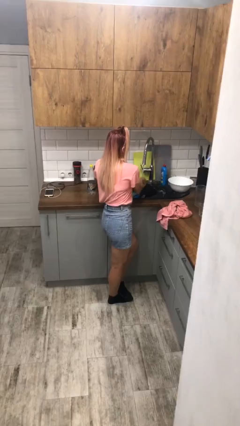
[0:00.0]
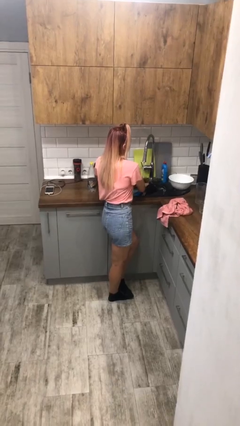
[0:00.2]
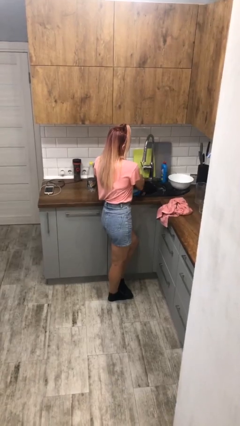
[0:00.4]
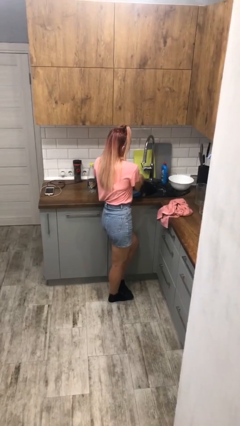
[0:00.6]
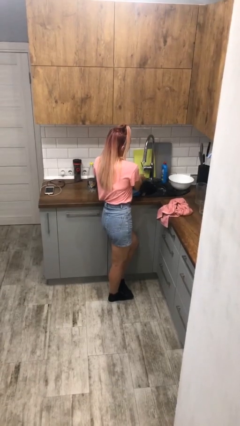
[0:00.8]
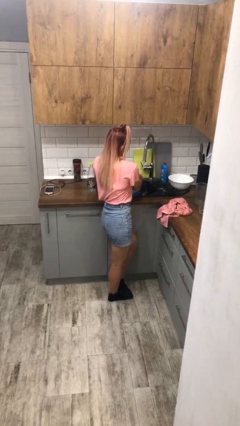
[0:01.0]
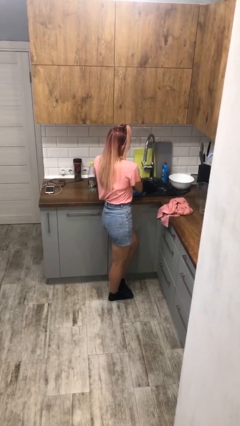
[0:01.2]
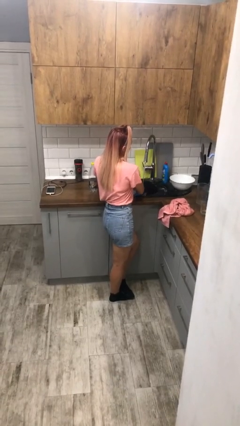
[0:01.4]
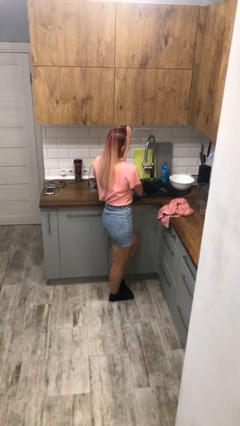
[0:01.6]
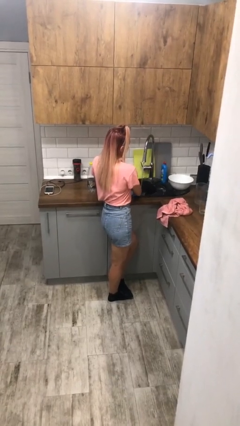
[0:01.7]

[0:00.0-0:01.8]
person washes hands

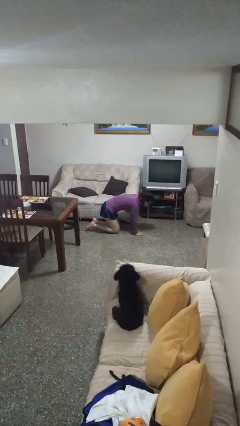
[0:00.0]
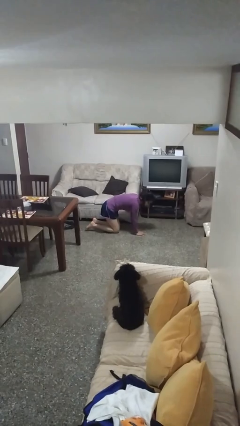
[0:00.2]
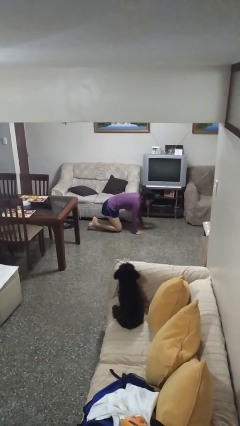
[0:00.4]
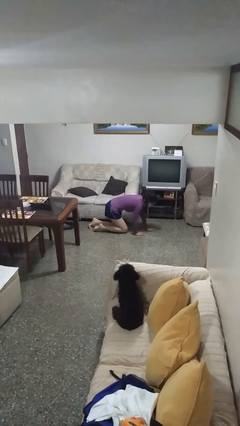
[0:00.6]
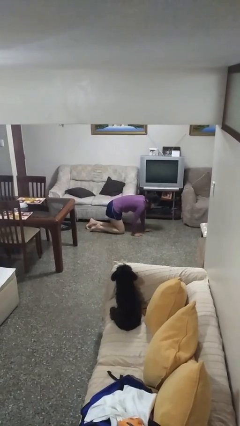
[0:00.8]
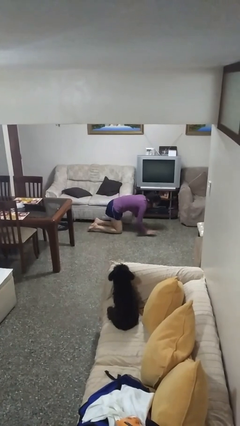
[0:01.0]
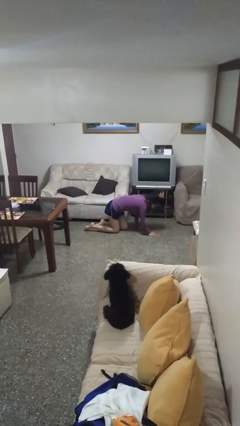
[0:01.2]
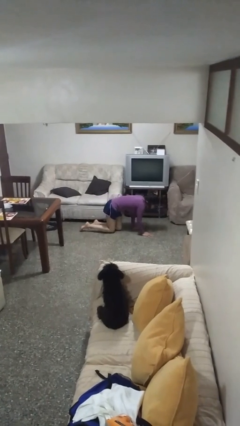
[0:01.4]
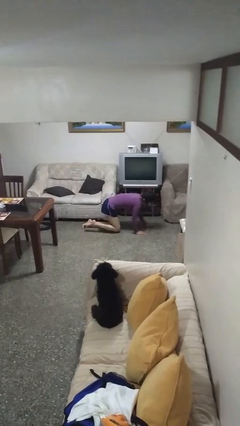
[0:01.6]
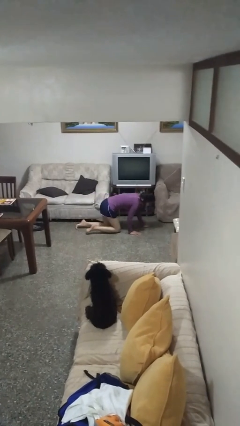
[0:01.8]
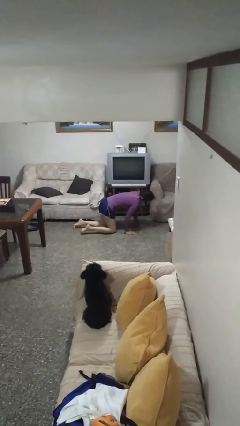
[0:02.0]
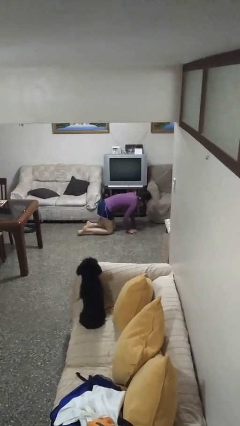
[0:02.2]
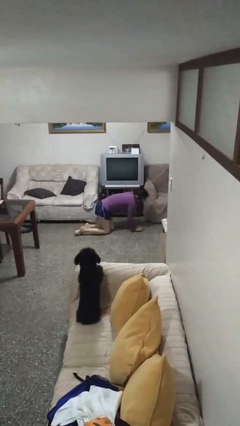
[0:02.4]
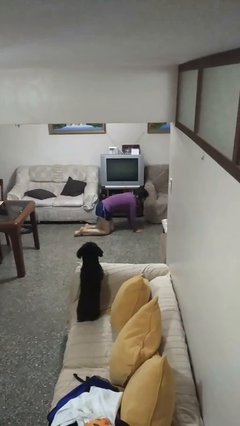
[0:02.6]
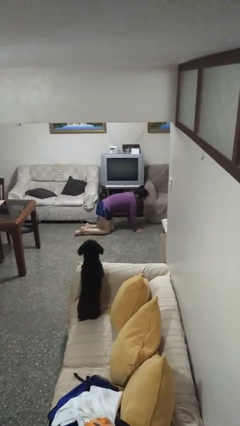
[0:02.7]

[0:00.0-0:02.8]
person crawls

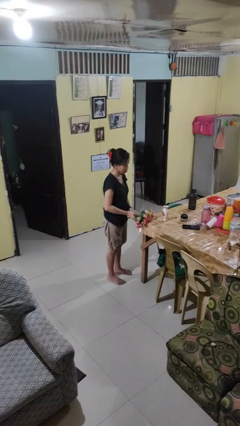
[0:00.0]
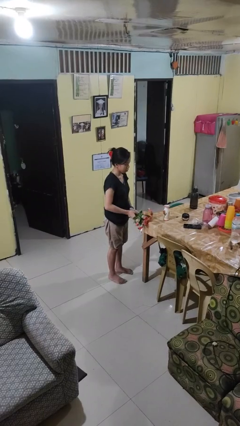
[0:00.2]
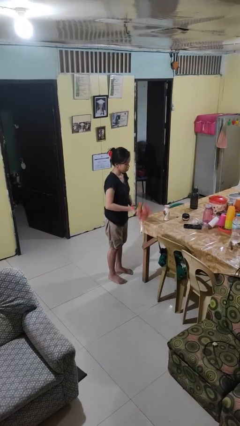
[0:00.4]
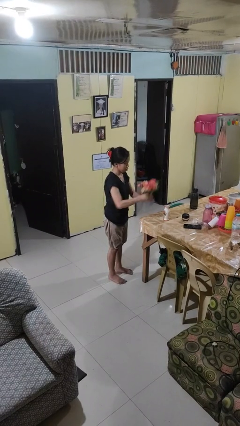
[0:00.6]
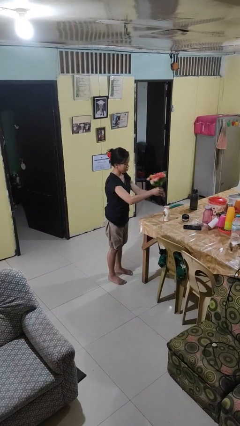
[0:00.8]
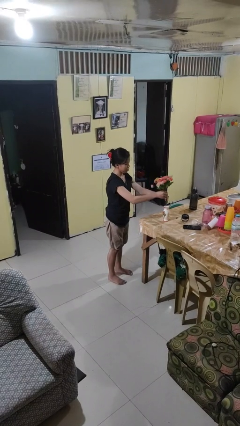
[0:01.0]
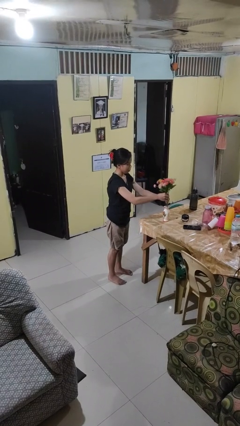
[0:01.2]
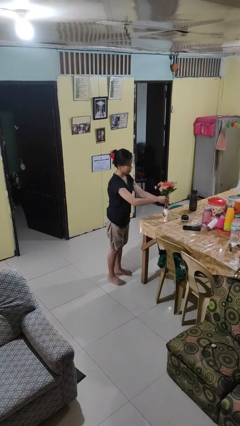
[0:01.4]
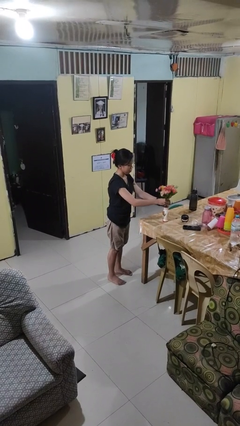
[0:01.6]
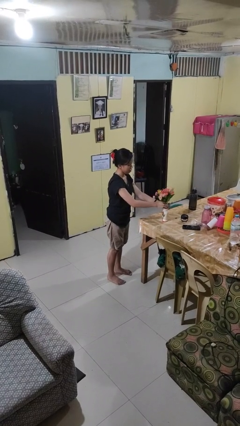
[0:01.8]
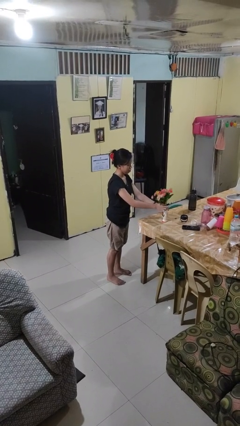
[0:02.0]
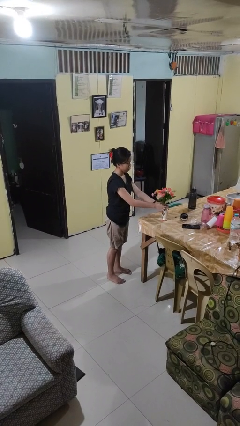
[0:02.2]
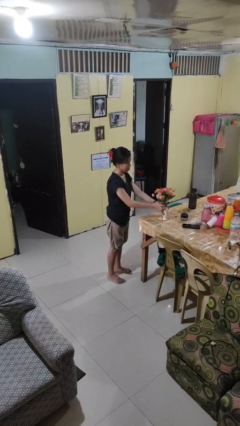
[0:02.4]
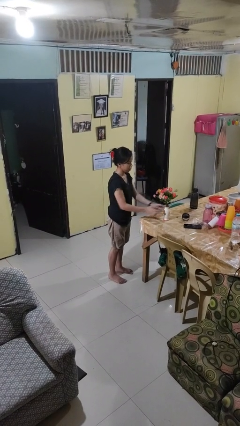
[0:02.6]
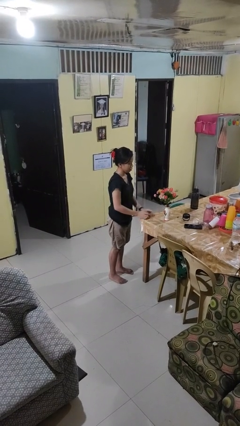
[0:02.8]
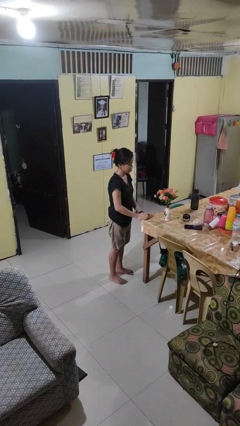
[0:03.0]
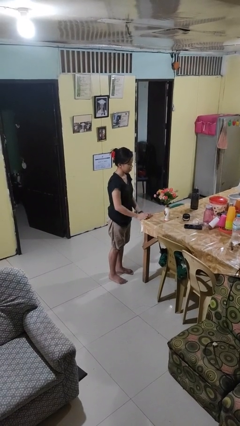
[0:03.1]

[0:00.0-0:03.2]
person arranges flowers in vase

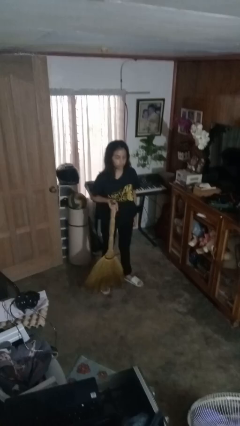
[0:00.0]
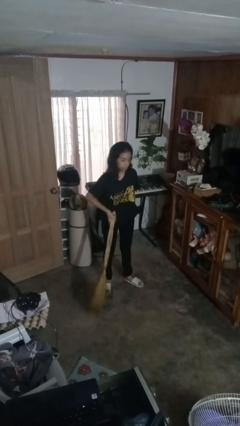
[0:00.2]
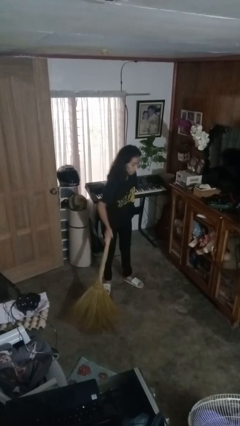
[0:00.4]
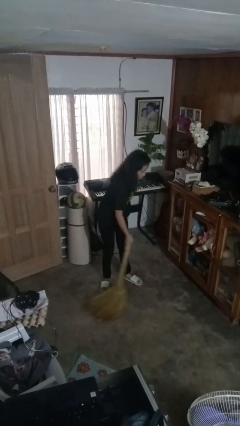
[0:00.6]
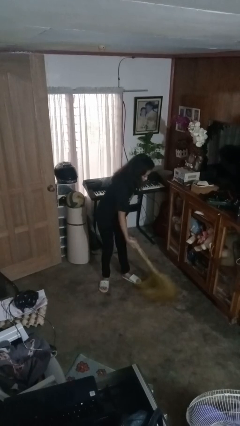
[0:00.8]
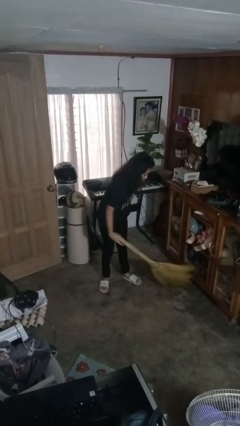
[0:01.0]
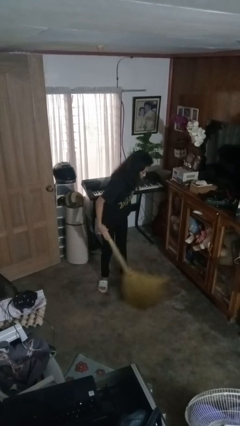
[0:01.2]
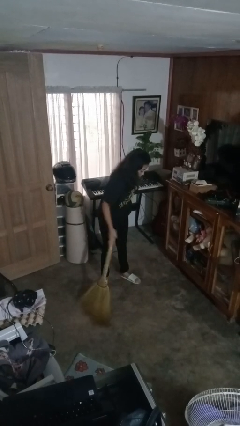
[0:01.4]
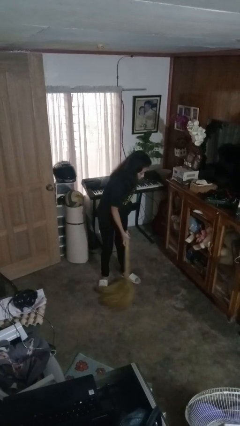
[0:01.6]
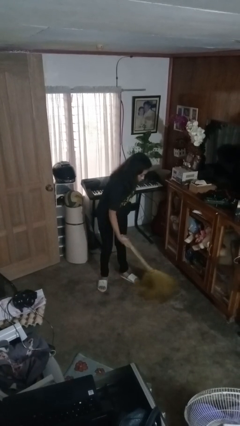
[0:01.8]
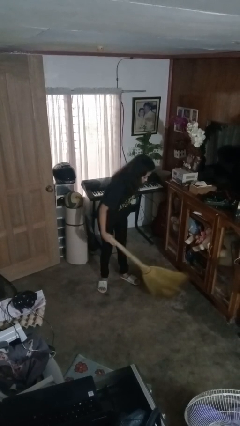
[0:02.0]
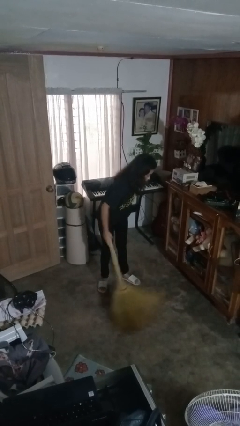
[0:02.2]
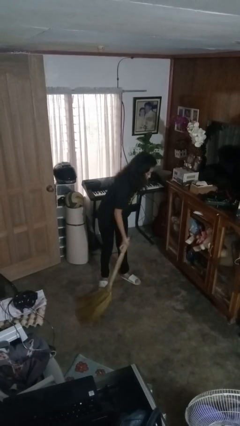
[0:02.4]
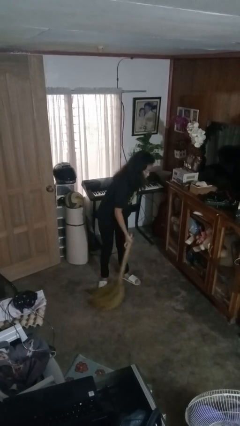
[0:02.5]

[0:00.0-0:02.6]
person sweeps floor

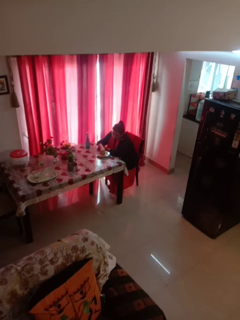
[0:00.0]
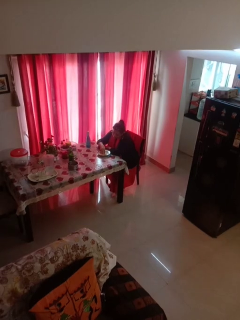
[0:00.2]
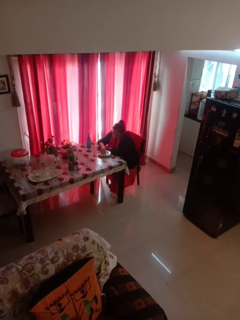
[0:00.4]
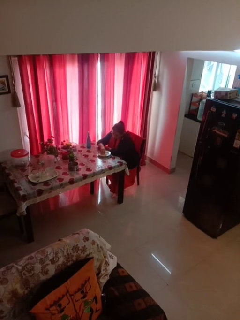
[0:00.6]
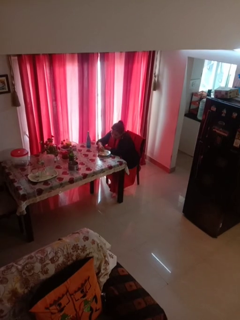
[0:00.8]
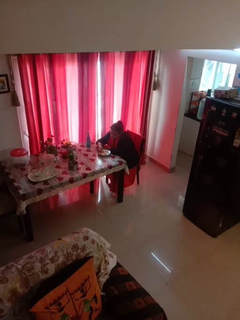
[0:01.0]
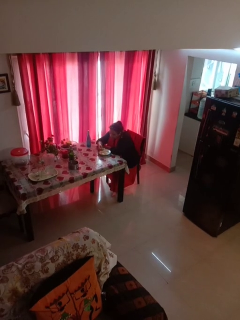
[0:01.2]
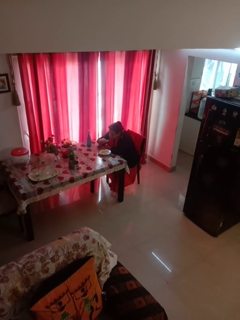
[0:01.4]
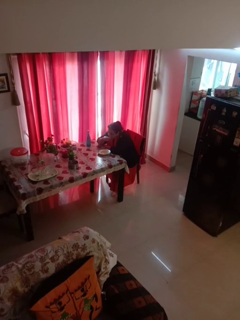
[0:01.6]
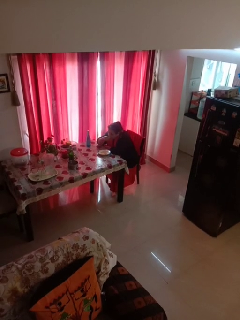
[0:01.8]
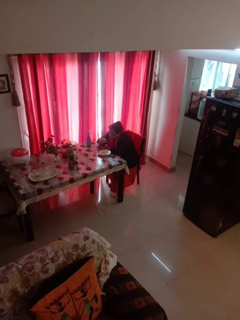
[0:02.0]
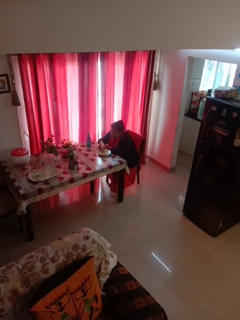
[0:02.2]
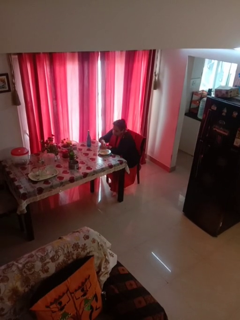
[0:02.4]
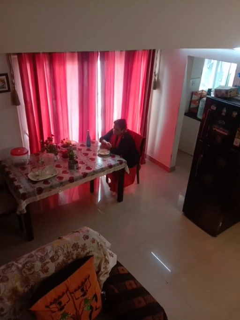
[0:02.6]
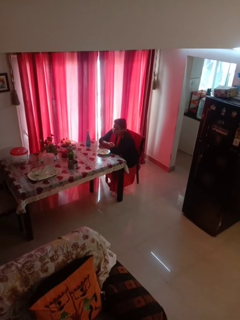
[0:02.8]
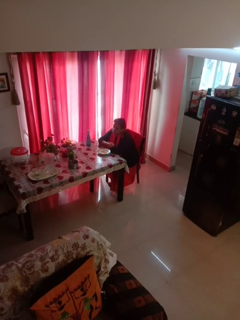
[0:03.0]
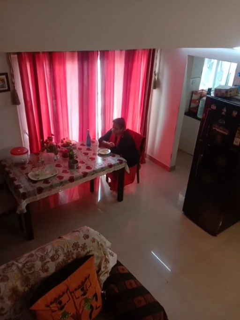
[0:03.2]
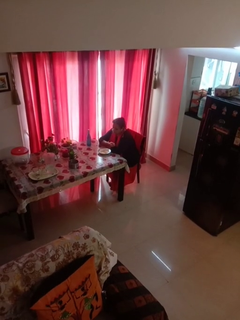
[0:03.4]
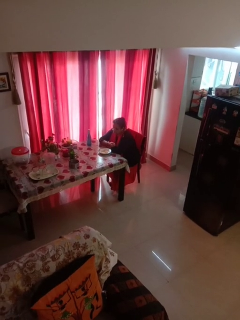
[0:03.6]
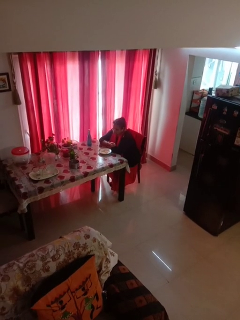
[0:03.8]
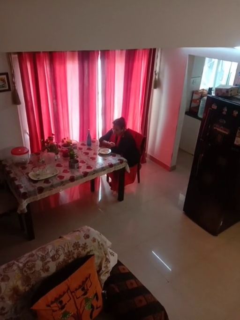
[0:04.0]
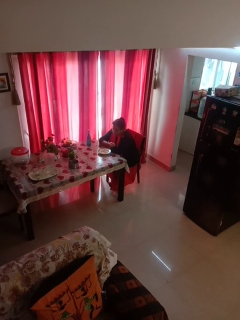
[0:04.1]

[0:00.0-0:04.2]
person eats with hands

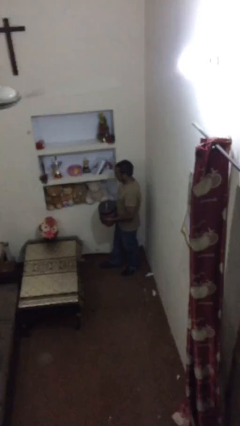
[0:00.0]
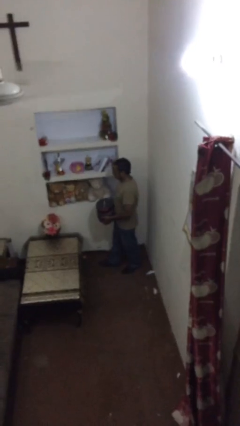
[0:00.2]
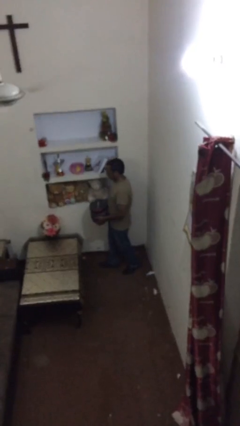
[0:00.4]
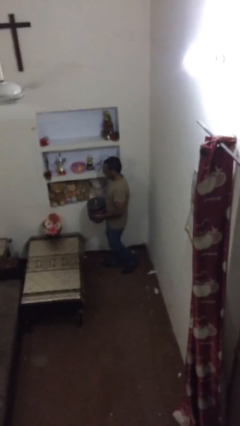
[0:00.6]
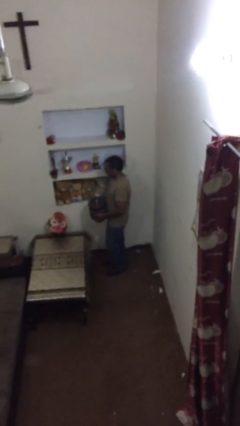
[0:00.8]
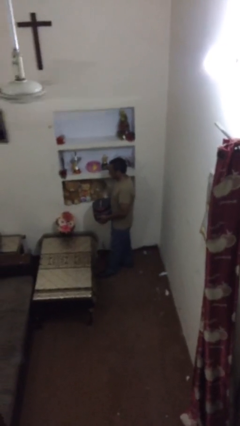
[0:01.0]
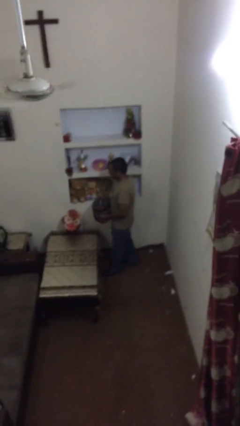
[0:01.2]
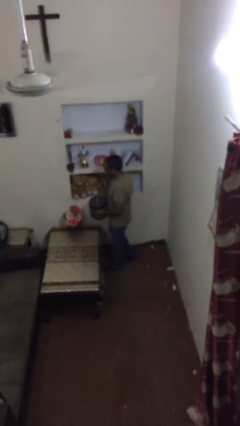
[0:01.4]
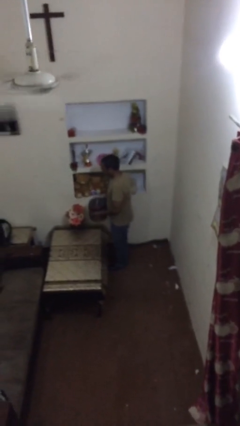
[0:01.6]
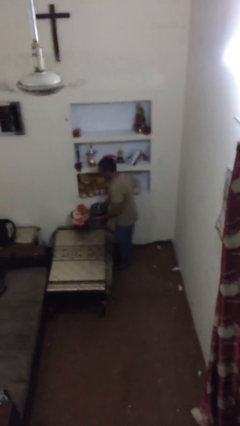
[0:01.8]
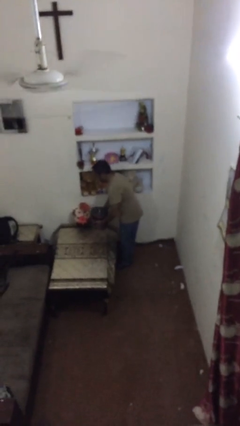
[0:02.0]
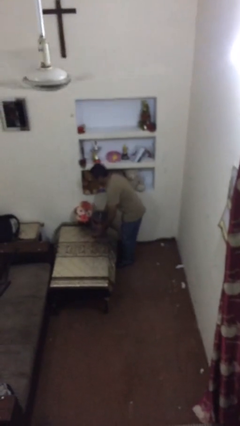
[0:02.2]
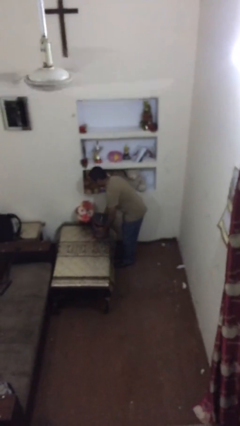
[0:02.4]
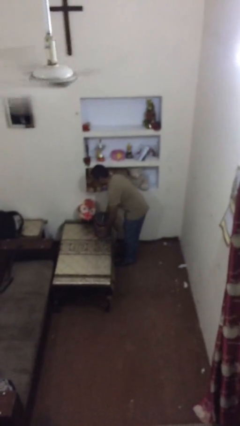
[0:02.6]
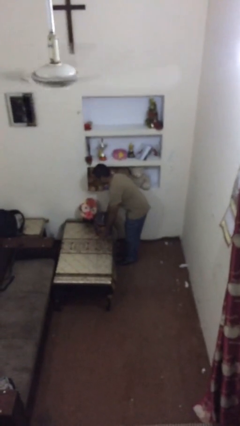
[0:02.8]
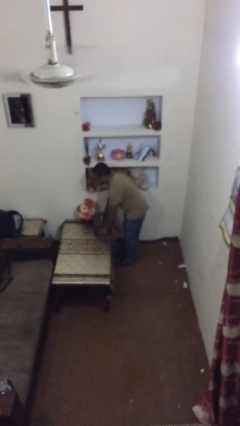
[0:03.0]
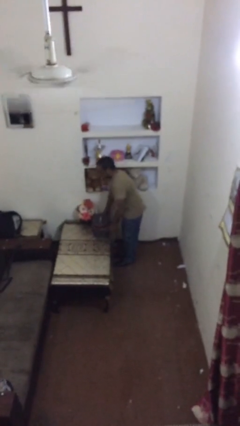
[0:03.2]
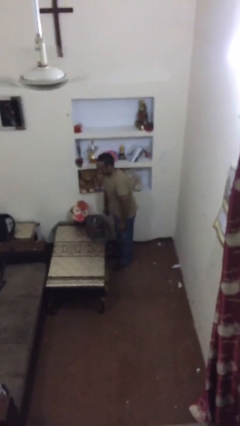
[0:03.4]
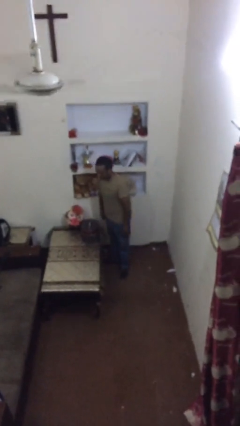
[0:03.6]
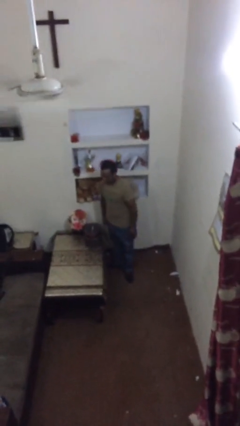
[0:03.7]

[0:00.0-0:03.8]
person puts down object on table
